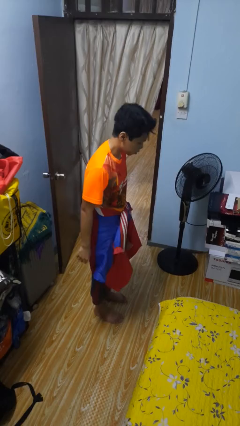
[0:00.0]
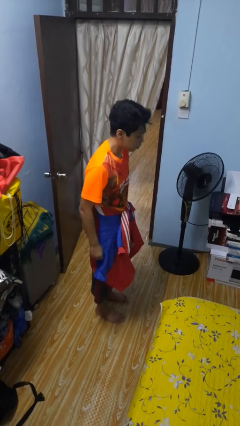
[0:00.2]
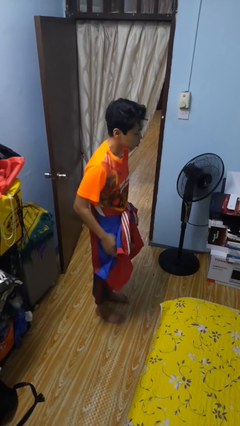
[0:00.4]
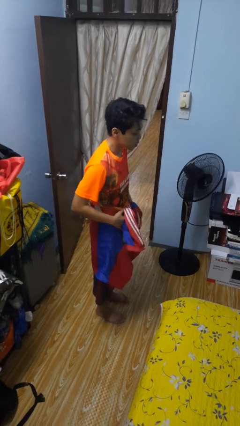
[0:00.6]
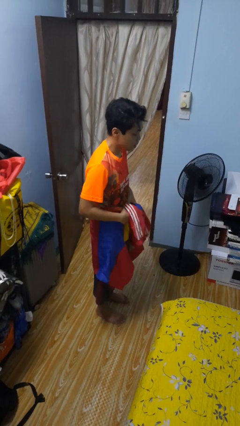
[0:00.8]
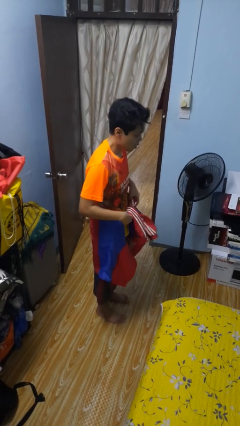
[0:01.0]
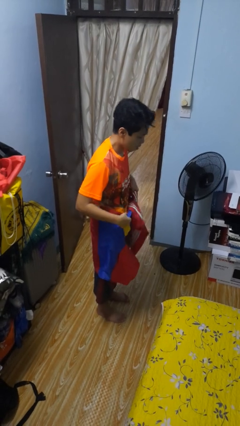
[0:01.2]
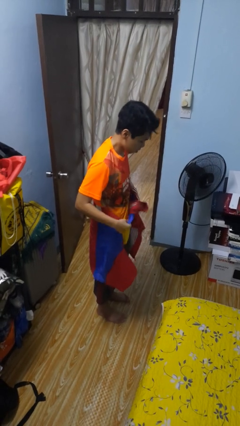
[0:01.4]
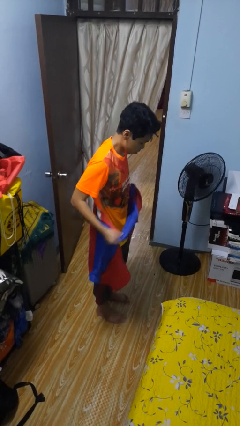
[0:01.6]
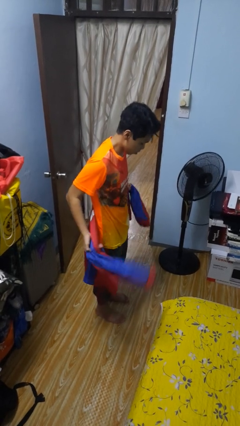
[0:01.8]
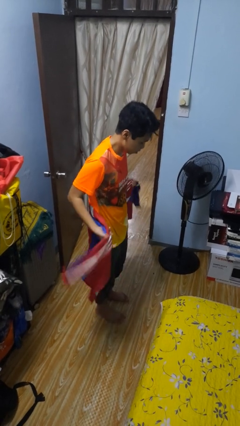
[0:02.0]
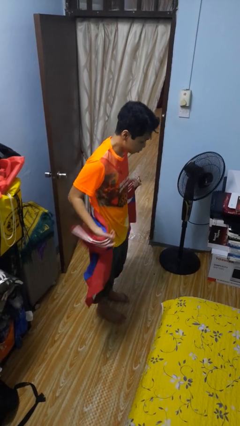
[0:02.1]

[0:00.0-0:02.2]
person unties jacket around waist

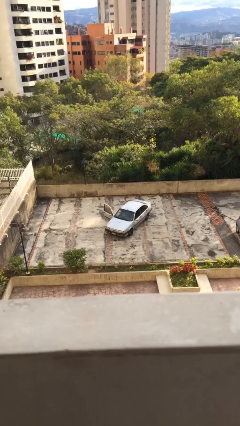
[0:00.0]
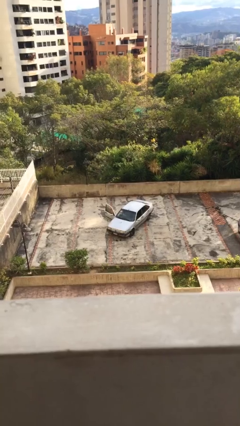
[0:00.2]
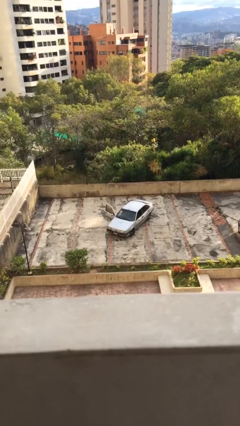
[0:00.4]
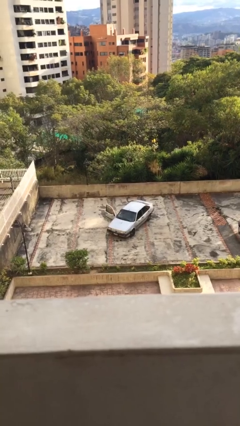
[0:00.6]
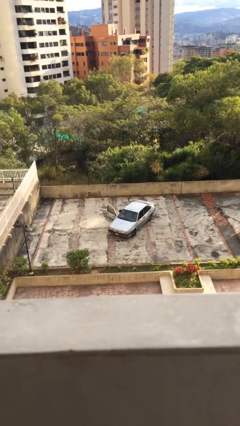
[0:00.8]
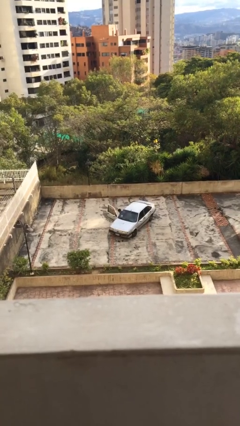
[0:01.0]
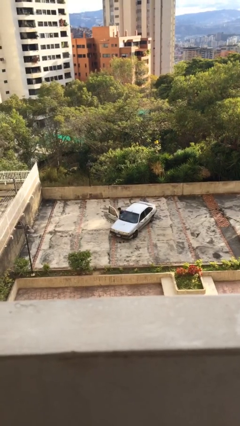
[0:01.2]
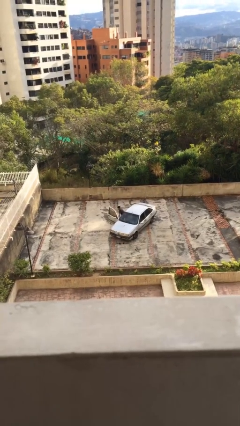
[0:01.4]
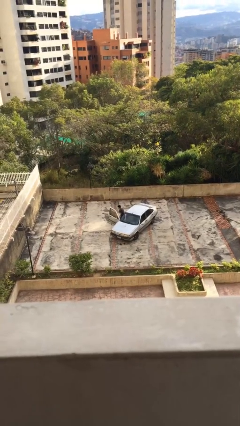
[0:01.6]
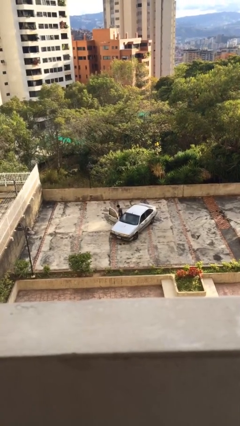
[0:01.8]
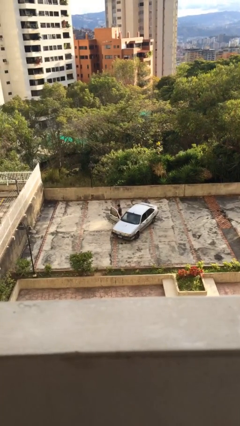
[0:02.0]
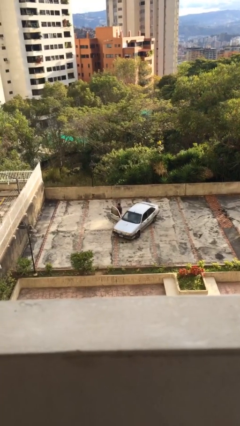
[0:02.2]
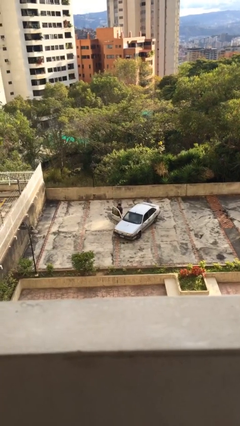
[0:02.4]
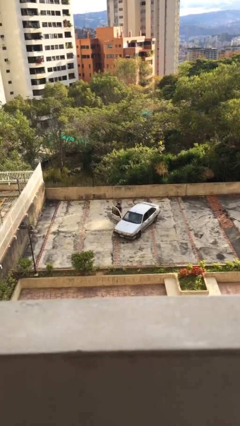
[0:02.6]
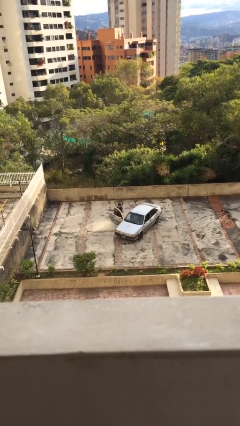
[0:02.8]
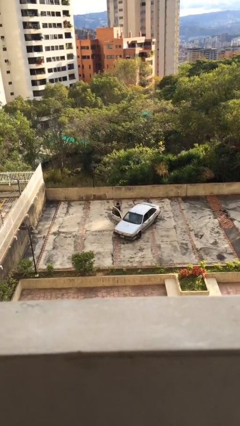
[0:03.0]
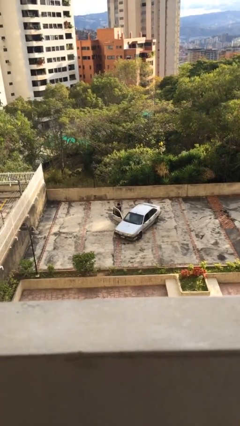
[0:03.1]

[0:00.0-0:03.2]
person exits car

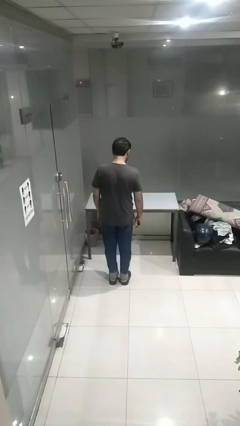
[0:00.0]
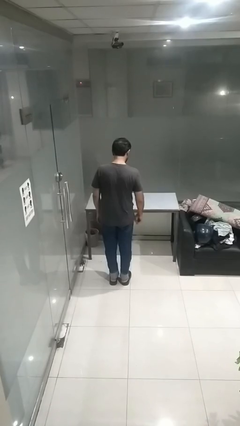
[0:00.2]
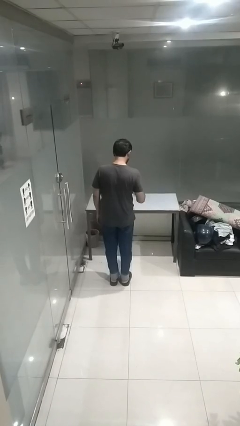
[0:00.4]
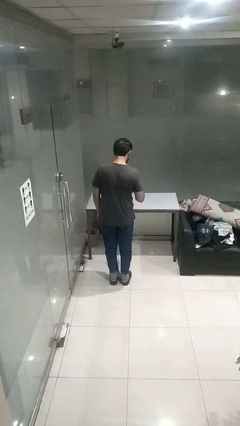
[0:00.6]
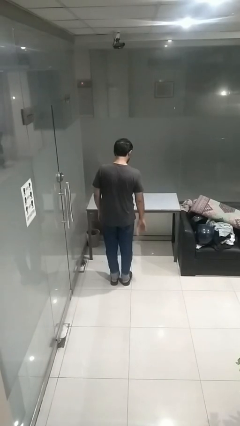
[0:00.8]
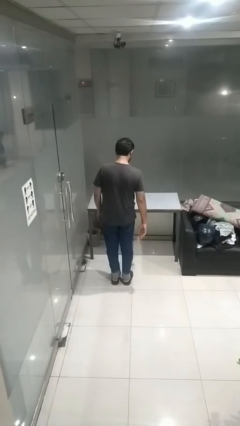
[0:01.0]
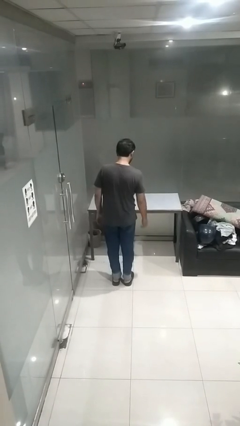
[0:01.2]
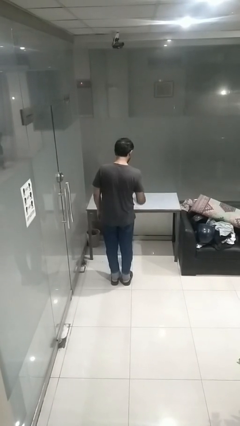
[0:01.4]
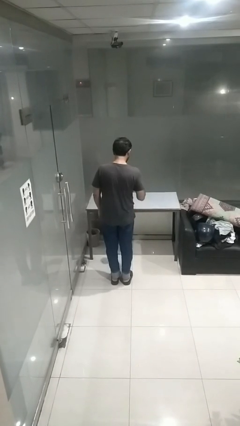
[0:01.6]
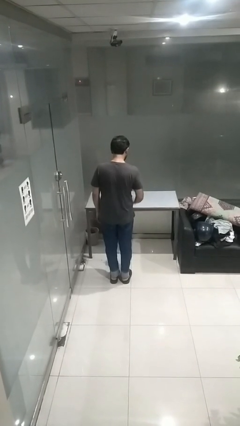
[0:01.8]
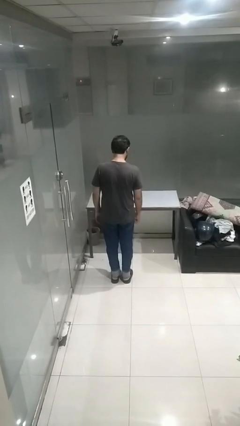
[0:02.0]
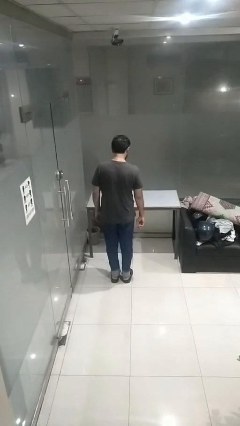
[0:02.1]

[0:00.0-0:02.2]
person bounces ball on floor

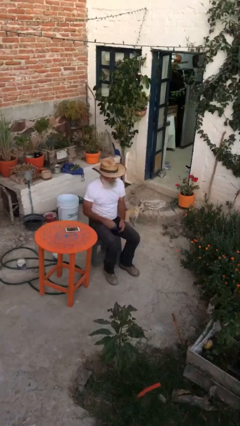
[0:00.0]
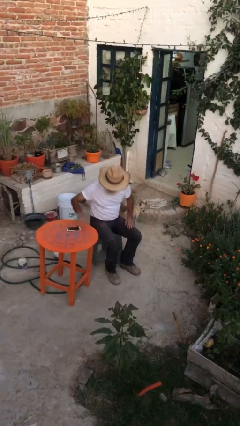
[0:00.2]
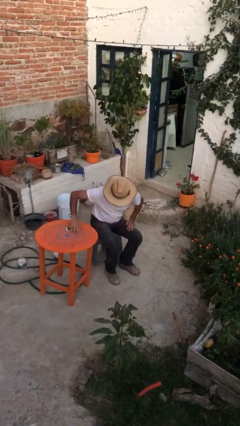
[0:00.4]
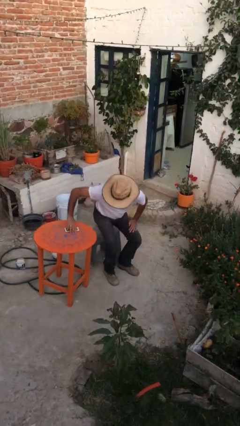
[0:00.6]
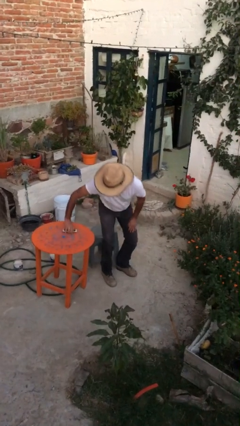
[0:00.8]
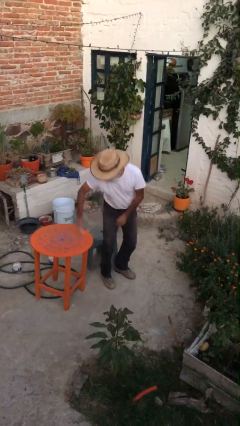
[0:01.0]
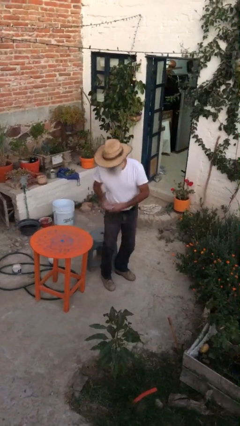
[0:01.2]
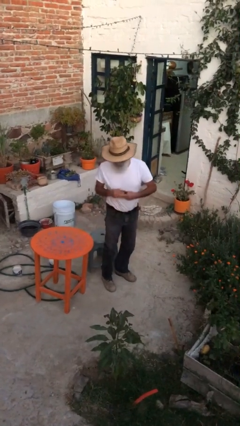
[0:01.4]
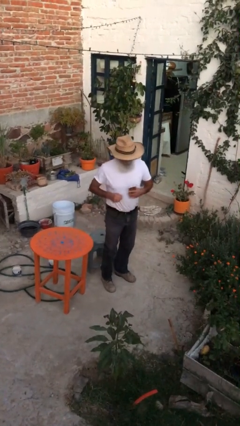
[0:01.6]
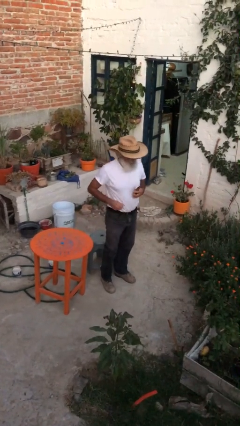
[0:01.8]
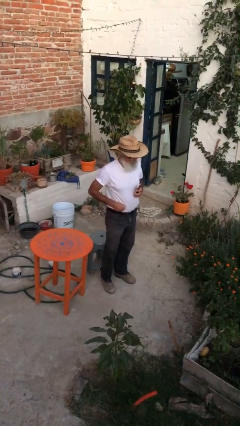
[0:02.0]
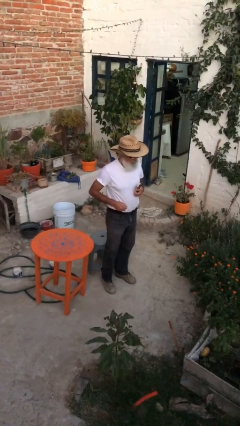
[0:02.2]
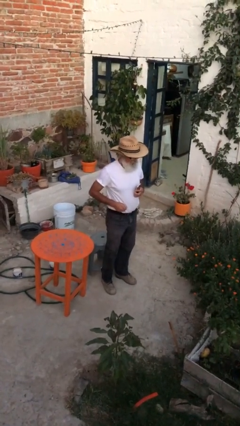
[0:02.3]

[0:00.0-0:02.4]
person stands up

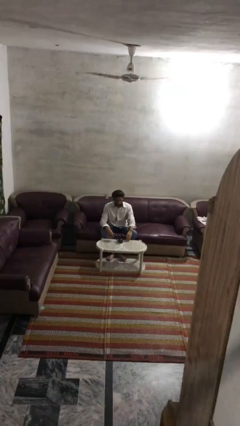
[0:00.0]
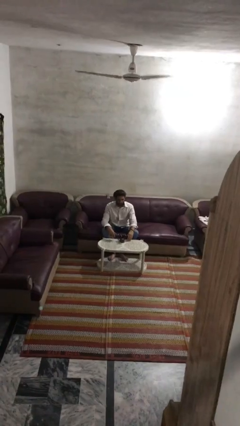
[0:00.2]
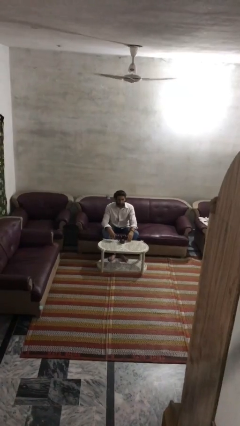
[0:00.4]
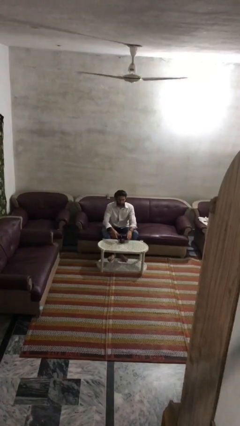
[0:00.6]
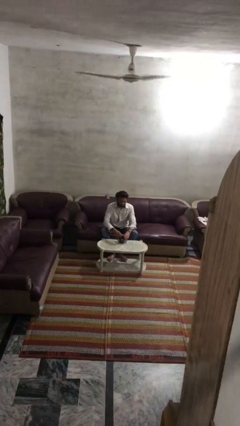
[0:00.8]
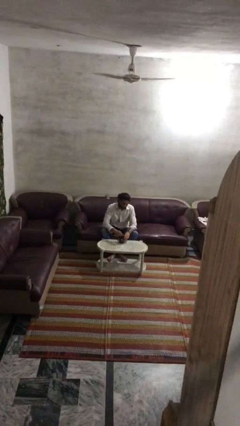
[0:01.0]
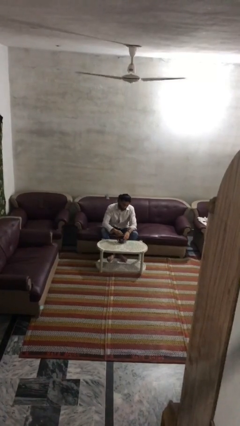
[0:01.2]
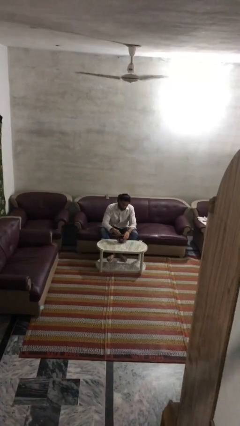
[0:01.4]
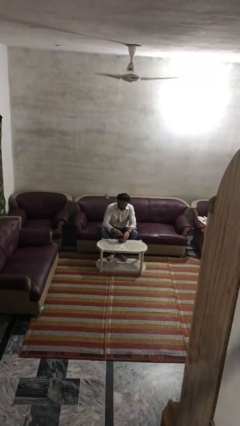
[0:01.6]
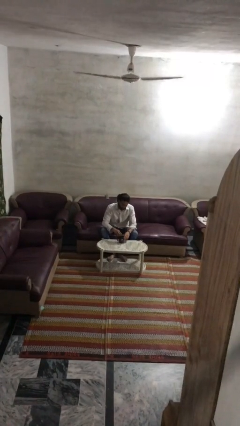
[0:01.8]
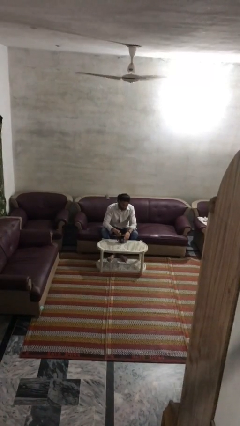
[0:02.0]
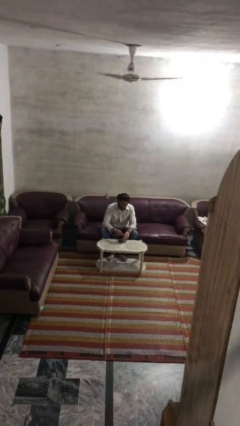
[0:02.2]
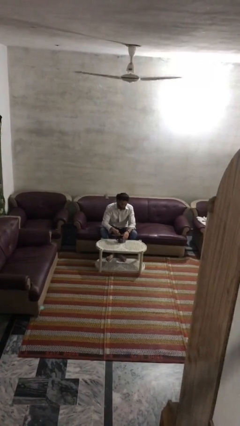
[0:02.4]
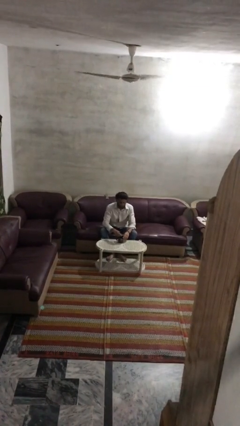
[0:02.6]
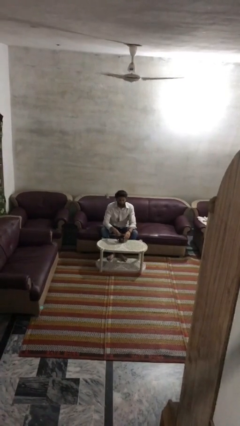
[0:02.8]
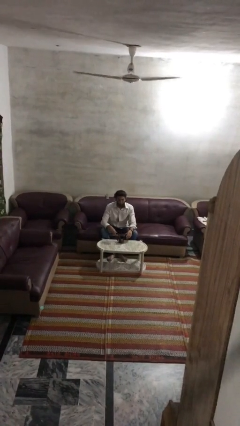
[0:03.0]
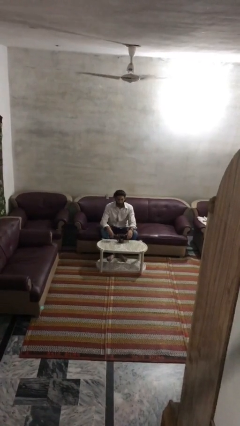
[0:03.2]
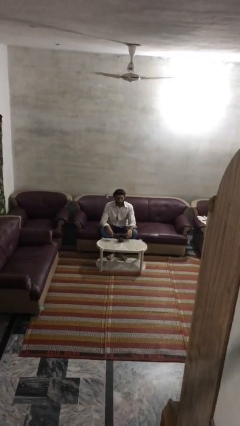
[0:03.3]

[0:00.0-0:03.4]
person stirs mug

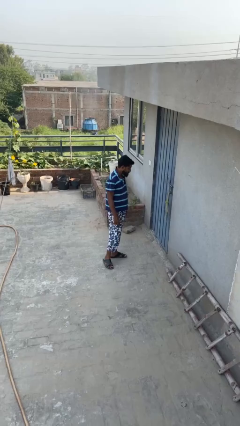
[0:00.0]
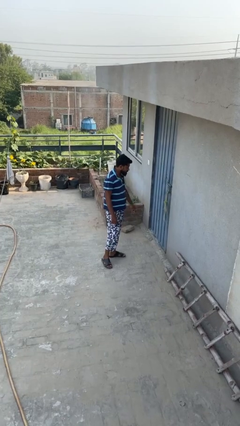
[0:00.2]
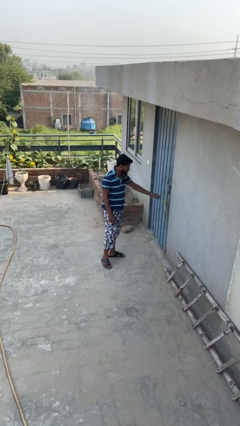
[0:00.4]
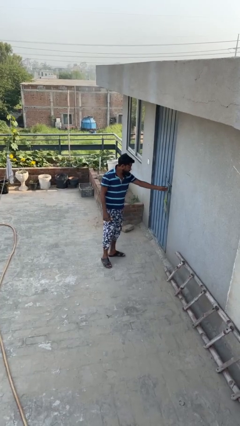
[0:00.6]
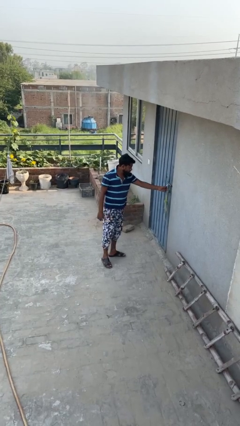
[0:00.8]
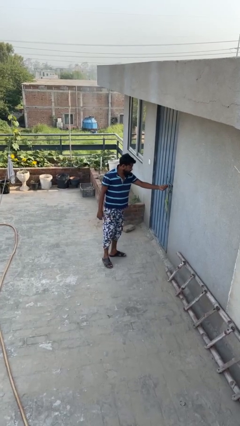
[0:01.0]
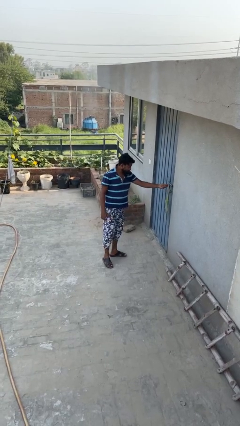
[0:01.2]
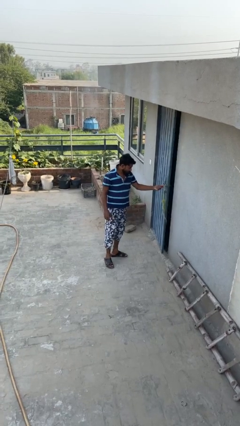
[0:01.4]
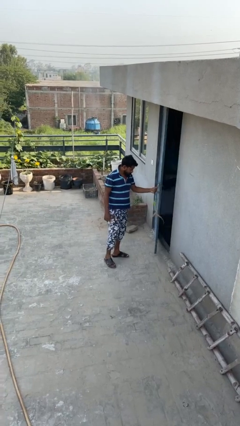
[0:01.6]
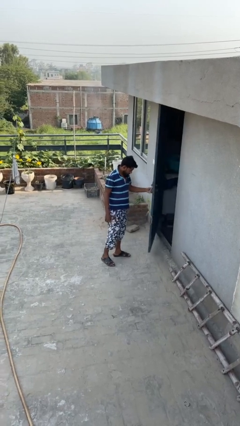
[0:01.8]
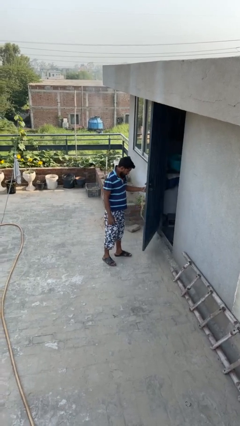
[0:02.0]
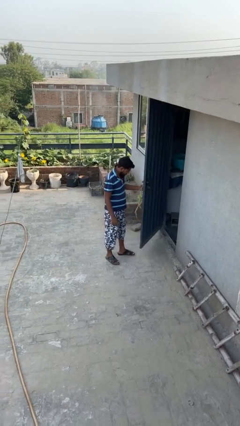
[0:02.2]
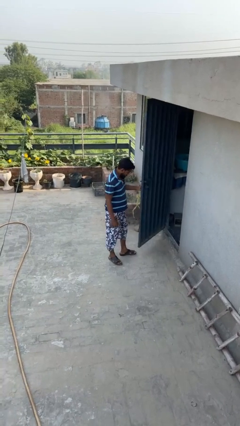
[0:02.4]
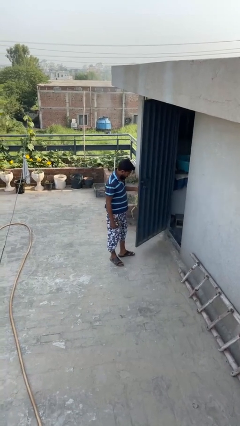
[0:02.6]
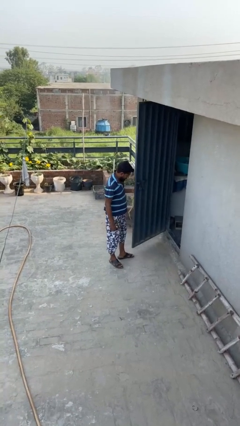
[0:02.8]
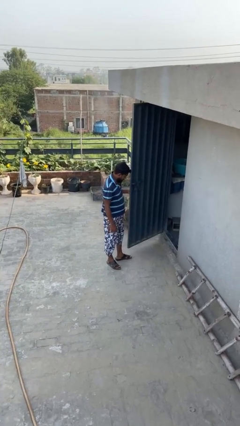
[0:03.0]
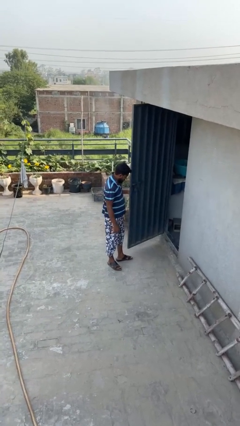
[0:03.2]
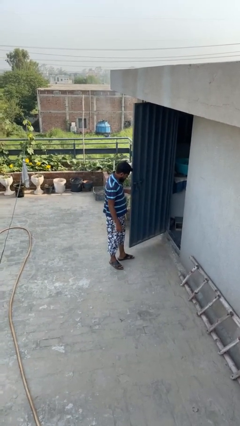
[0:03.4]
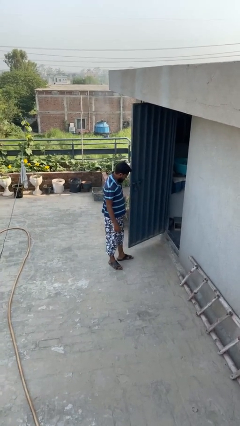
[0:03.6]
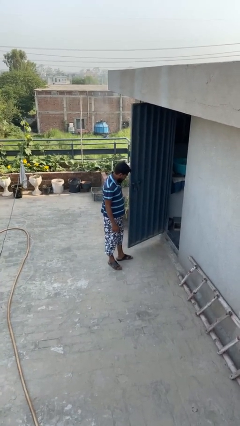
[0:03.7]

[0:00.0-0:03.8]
person opens facility door

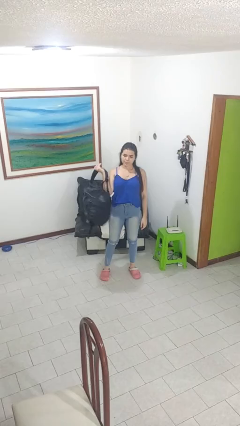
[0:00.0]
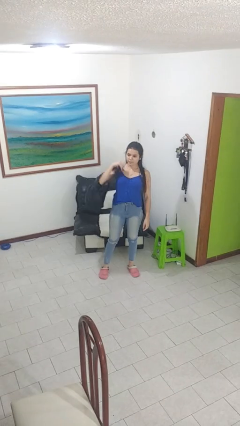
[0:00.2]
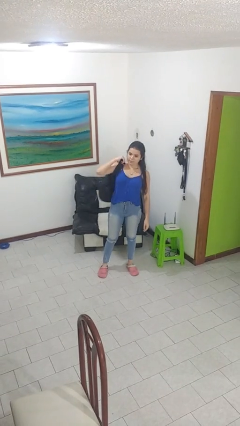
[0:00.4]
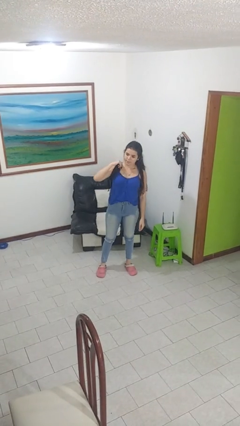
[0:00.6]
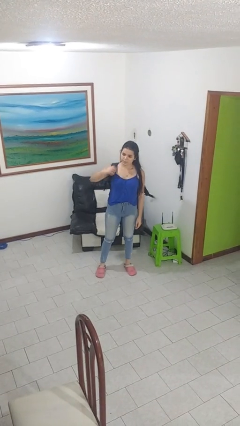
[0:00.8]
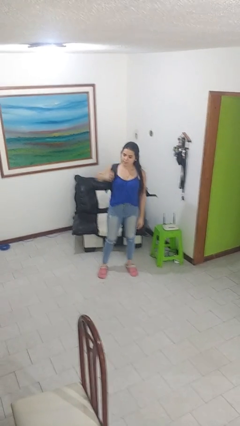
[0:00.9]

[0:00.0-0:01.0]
person puts on backpack
